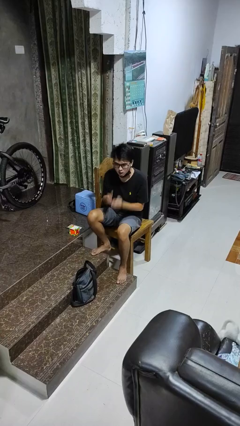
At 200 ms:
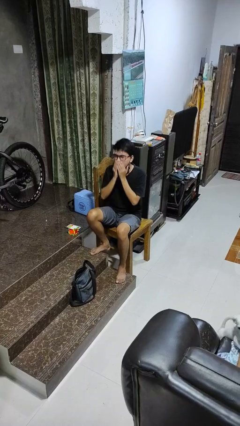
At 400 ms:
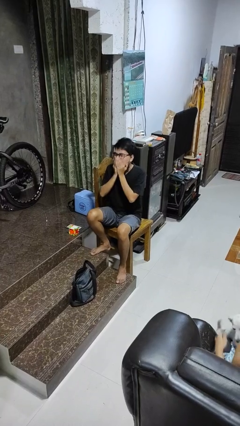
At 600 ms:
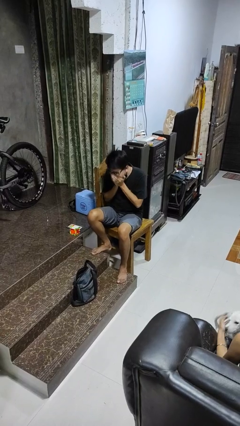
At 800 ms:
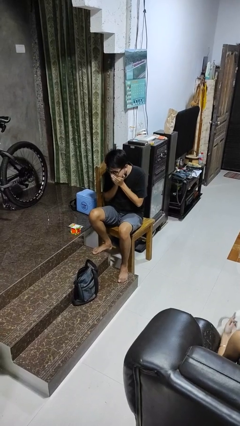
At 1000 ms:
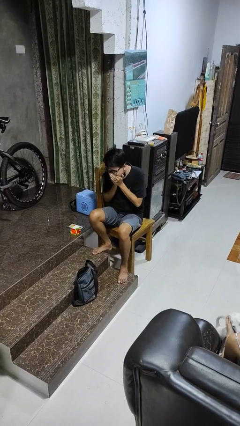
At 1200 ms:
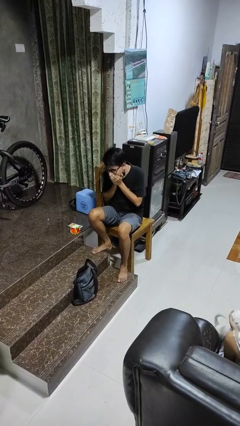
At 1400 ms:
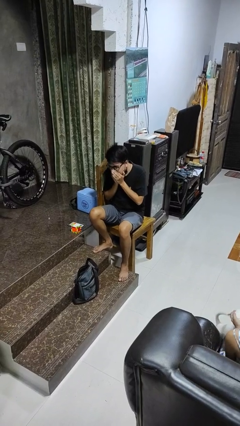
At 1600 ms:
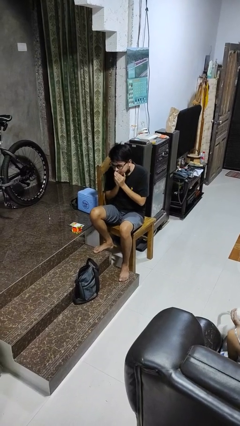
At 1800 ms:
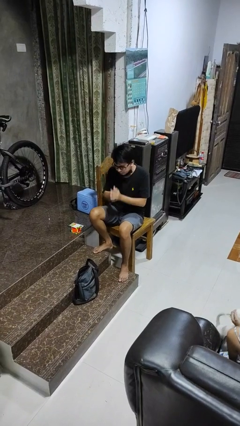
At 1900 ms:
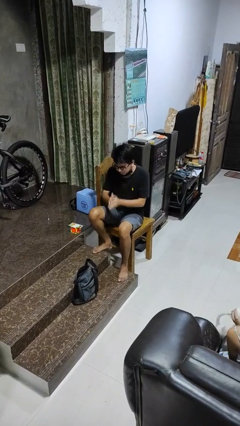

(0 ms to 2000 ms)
person sneezes into hand

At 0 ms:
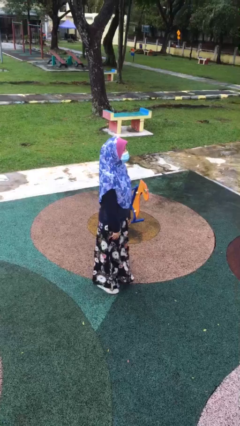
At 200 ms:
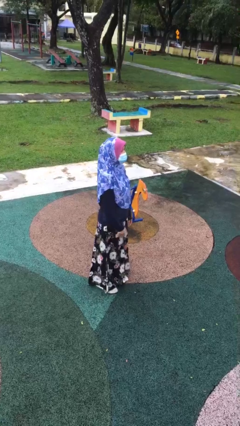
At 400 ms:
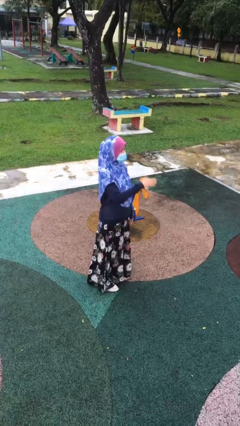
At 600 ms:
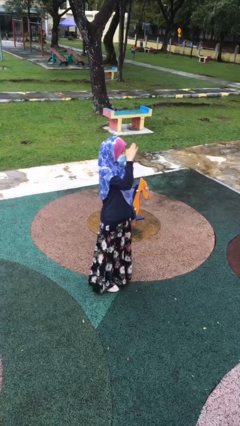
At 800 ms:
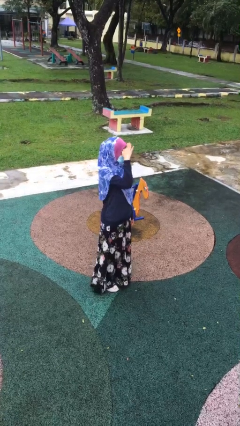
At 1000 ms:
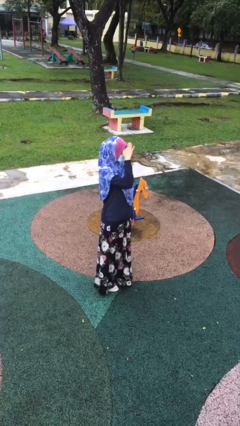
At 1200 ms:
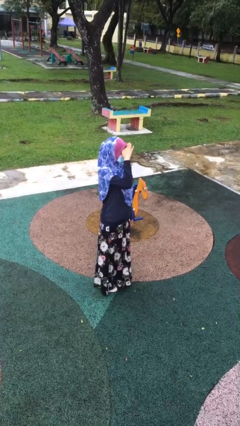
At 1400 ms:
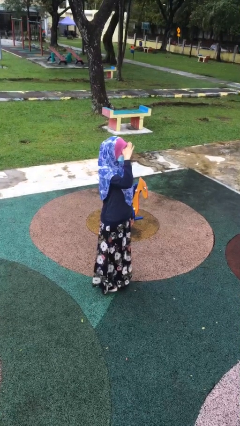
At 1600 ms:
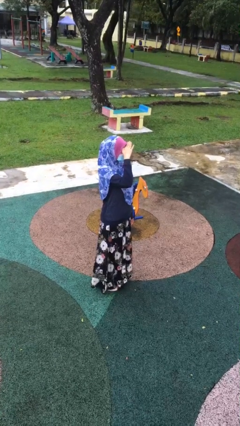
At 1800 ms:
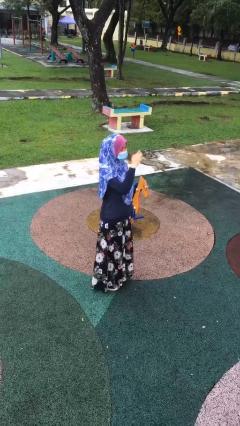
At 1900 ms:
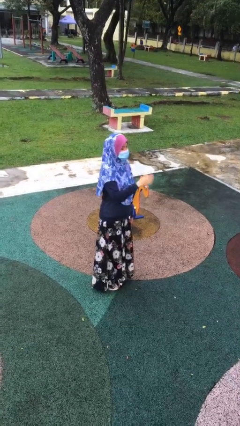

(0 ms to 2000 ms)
person salutes

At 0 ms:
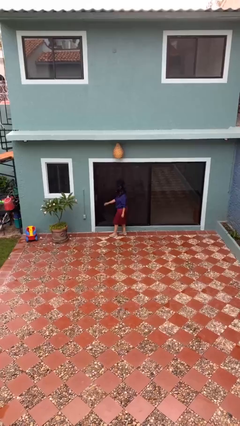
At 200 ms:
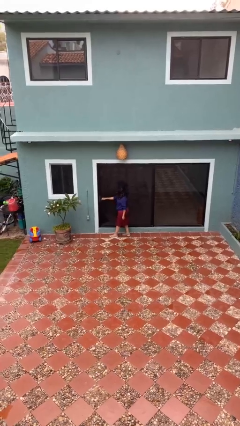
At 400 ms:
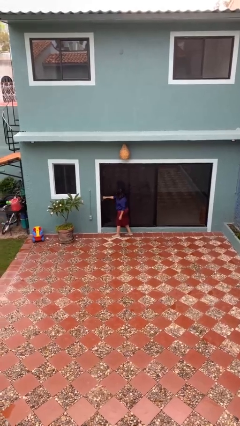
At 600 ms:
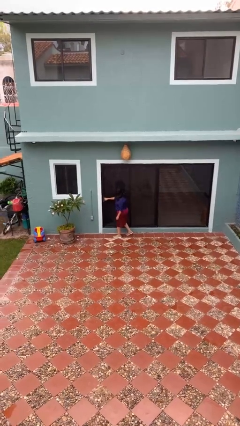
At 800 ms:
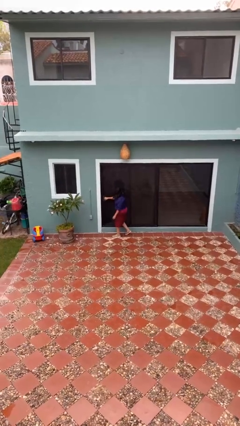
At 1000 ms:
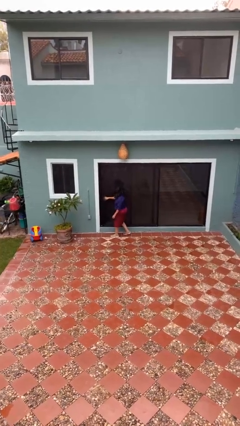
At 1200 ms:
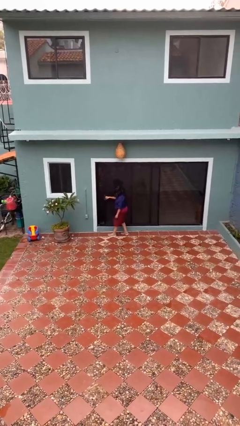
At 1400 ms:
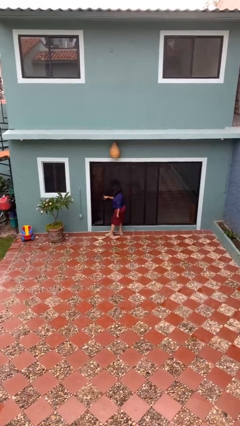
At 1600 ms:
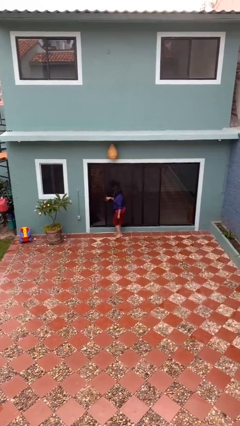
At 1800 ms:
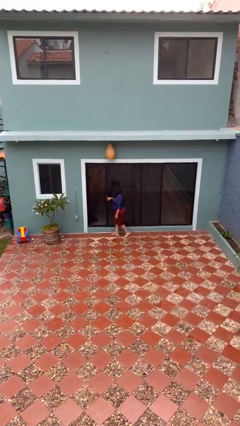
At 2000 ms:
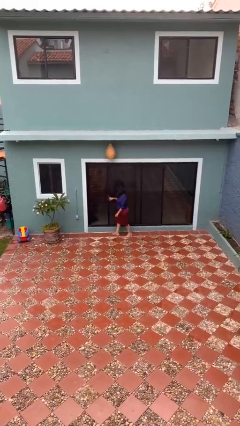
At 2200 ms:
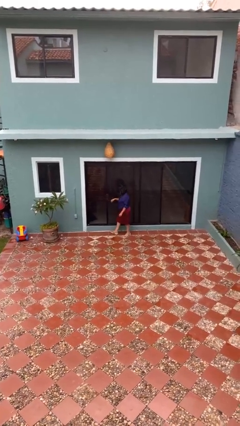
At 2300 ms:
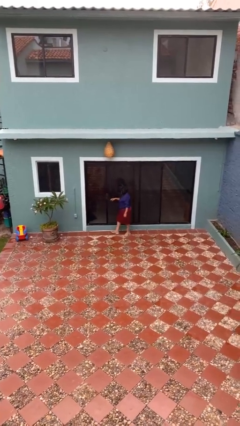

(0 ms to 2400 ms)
person opens sliding door

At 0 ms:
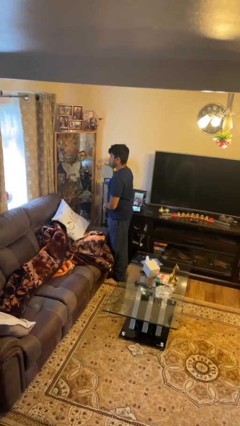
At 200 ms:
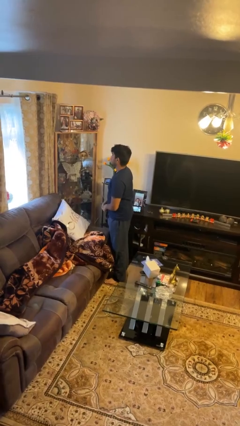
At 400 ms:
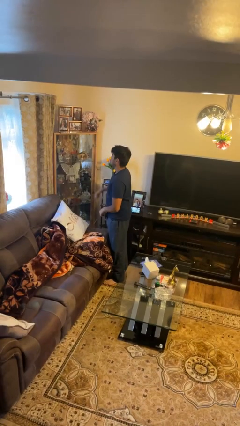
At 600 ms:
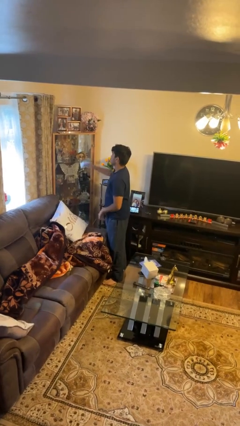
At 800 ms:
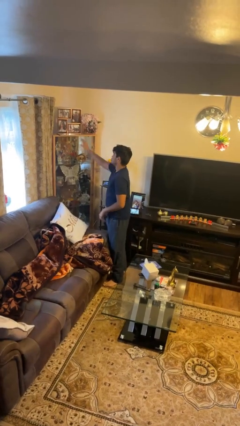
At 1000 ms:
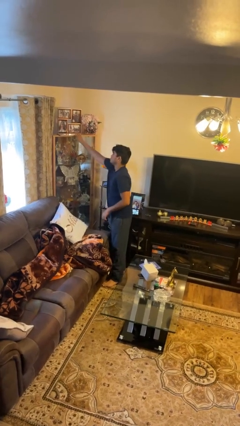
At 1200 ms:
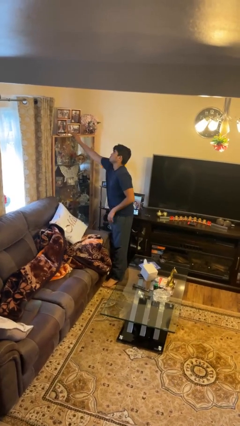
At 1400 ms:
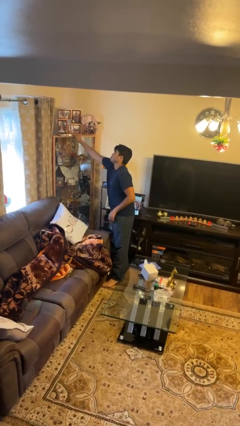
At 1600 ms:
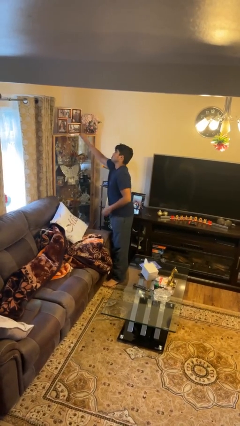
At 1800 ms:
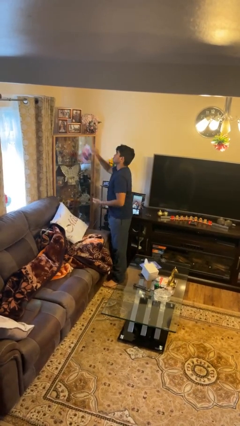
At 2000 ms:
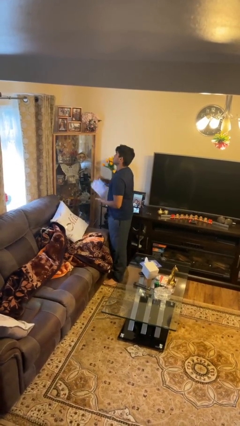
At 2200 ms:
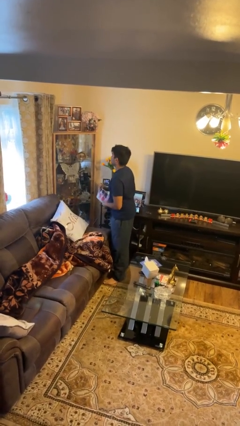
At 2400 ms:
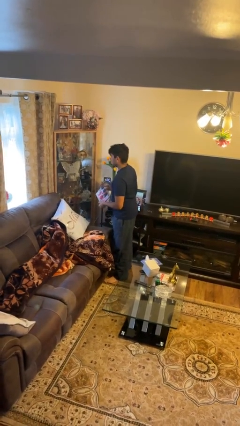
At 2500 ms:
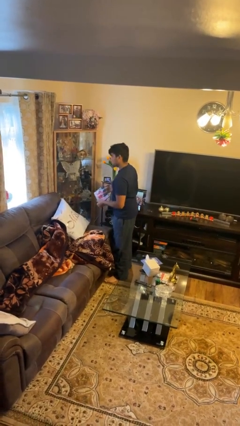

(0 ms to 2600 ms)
person picks up object from shelf

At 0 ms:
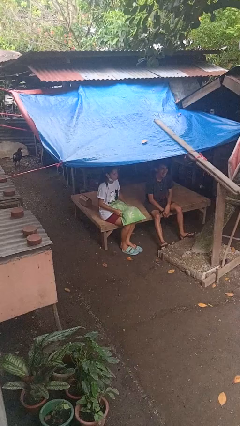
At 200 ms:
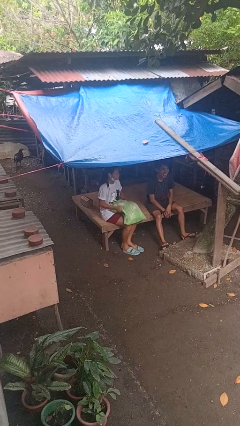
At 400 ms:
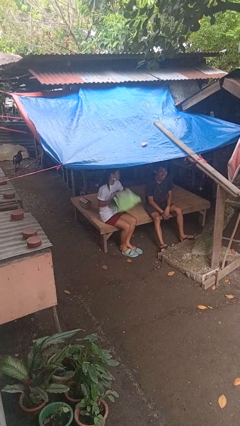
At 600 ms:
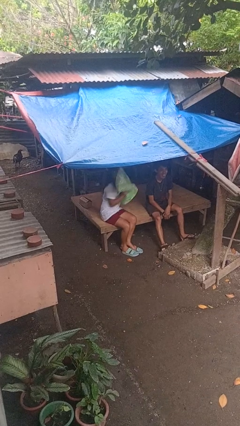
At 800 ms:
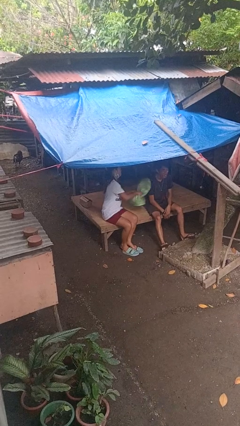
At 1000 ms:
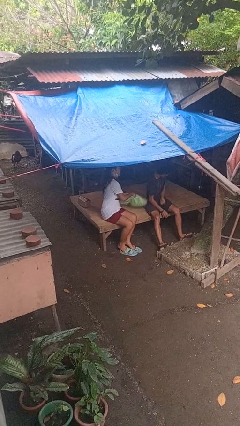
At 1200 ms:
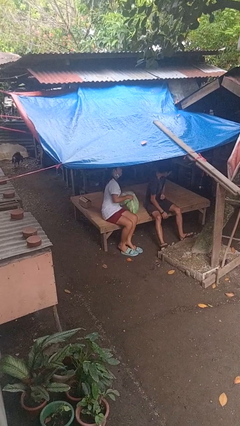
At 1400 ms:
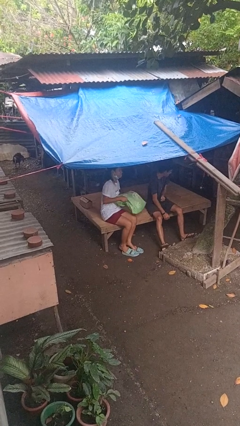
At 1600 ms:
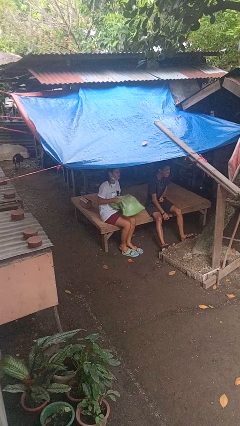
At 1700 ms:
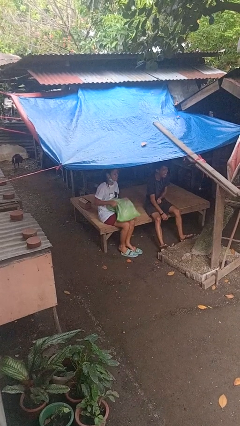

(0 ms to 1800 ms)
person hits person with pillow

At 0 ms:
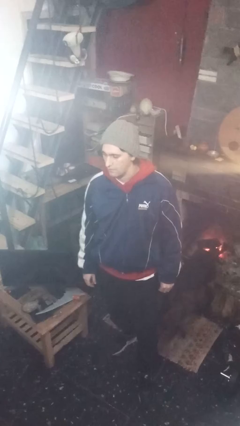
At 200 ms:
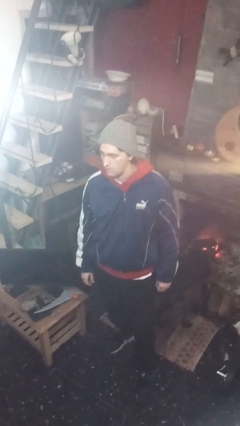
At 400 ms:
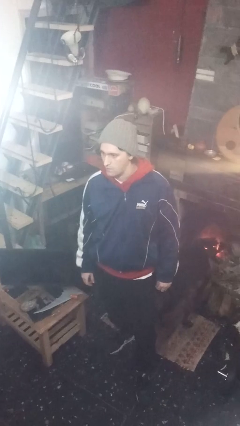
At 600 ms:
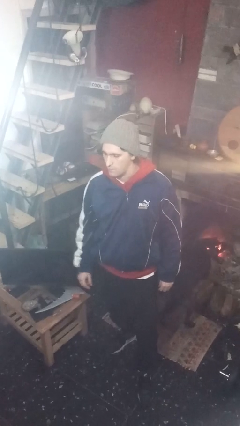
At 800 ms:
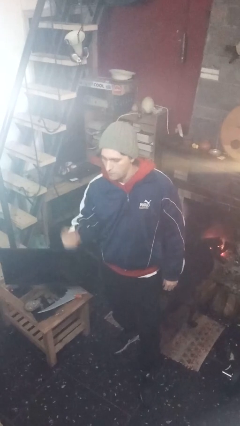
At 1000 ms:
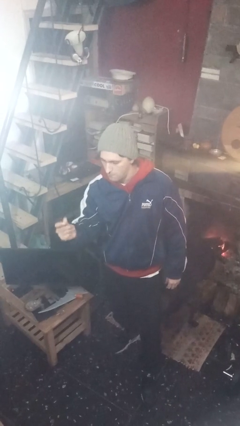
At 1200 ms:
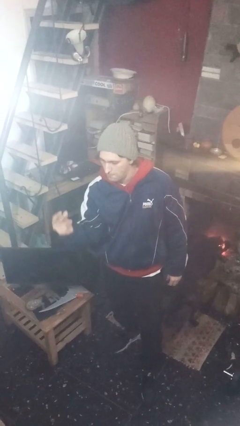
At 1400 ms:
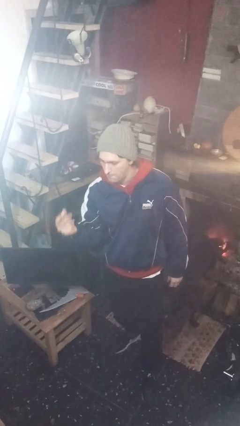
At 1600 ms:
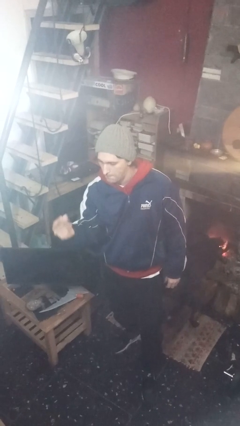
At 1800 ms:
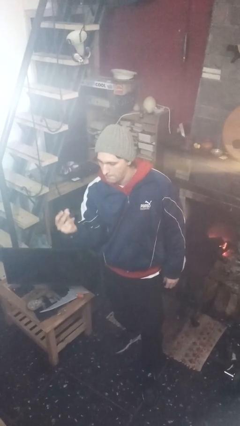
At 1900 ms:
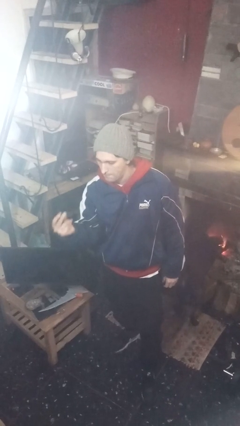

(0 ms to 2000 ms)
person snaps fingers

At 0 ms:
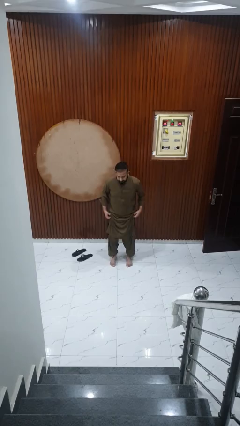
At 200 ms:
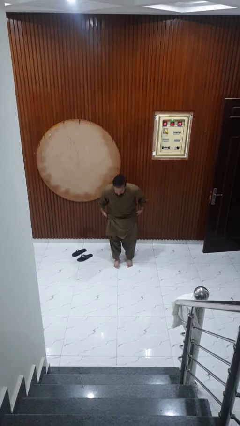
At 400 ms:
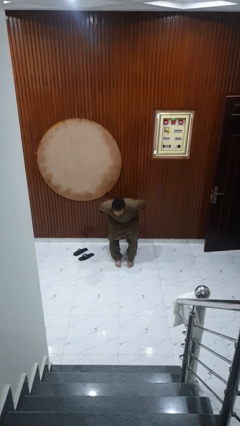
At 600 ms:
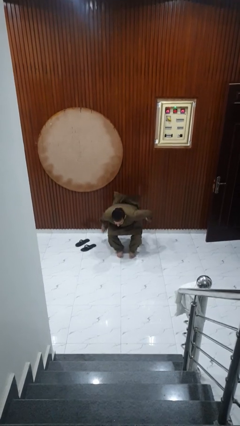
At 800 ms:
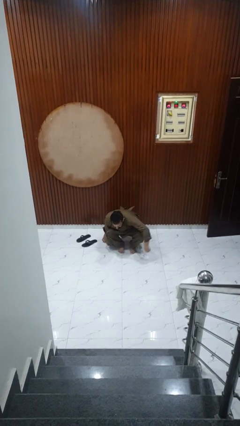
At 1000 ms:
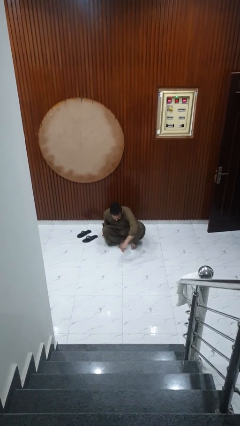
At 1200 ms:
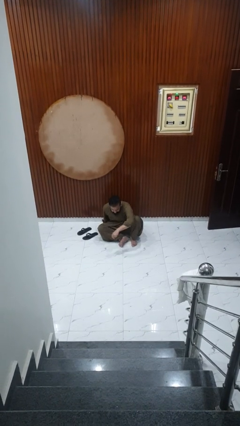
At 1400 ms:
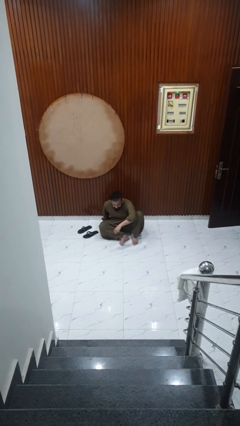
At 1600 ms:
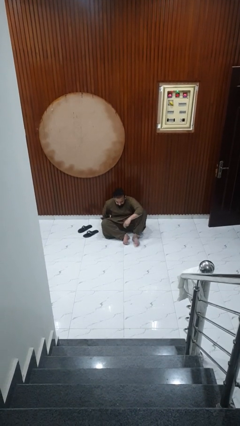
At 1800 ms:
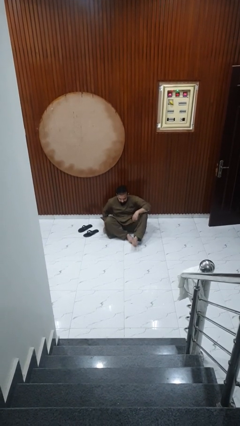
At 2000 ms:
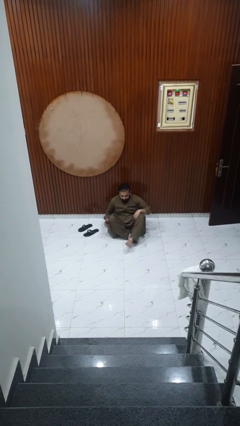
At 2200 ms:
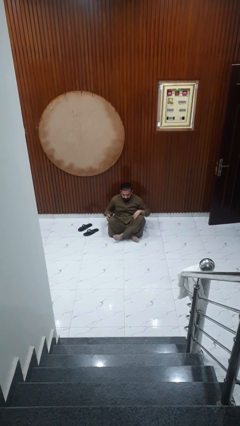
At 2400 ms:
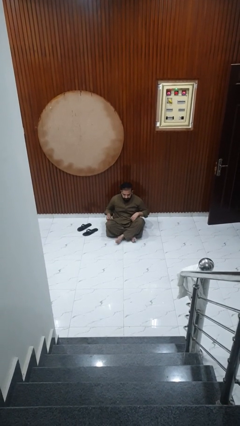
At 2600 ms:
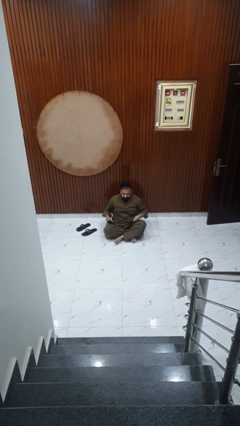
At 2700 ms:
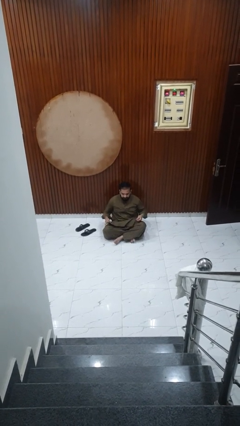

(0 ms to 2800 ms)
person sits crisscross

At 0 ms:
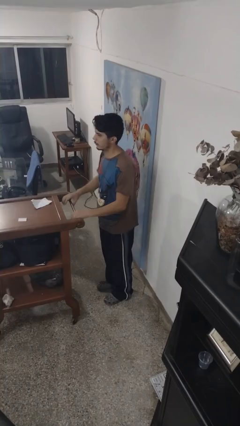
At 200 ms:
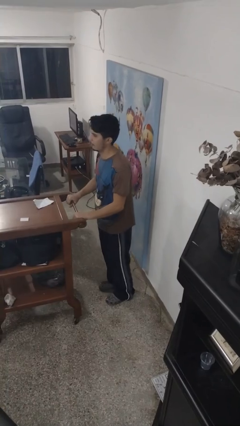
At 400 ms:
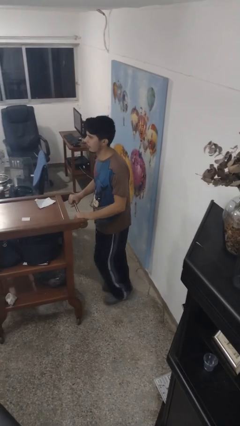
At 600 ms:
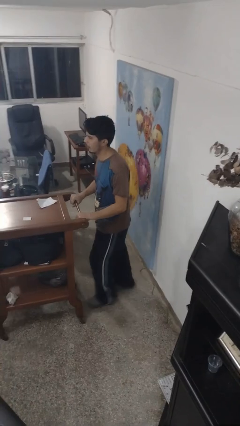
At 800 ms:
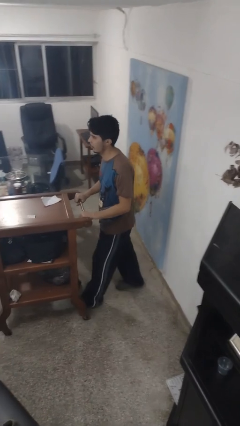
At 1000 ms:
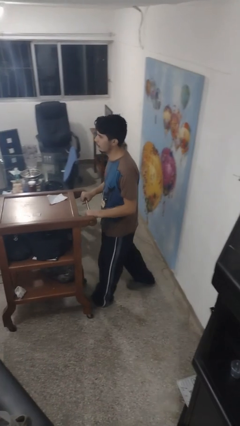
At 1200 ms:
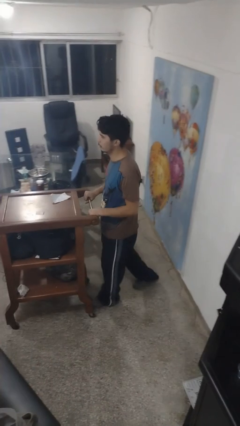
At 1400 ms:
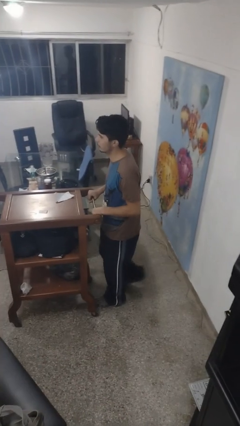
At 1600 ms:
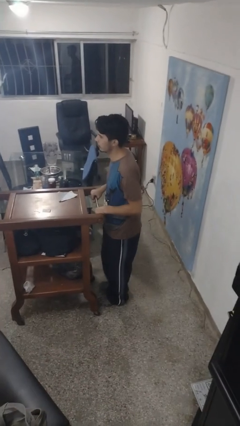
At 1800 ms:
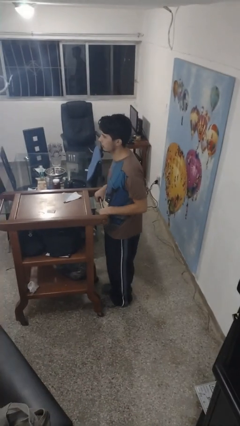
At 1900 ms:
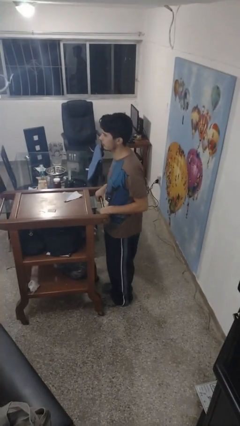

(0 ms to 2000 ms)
person pushes wheeled cart
